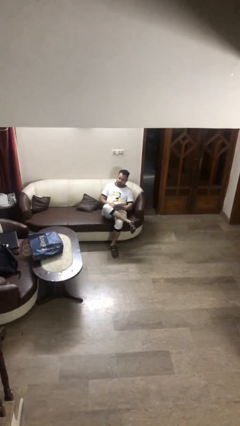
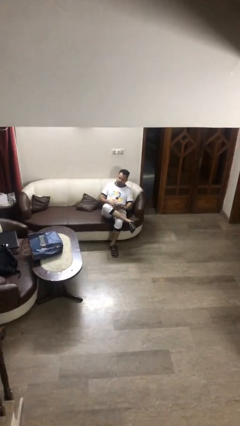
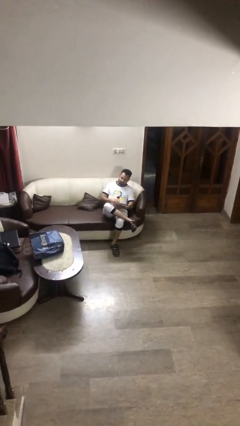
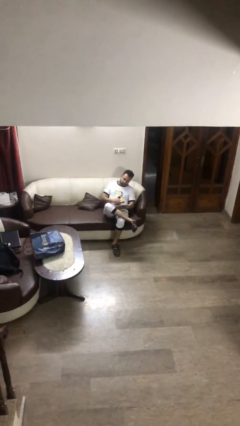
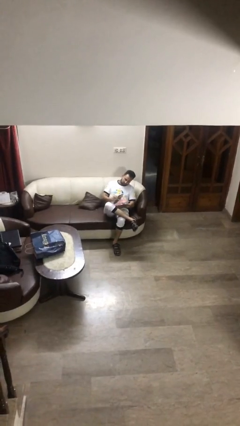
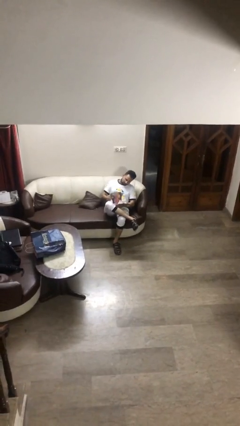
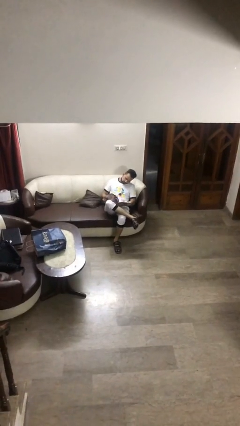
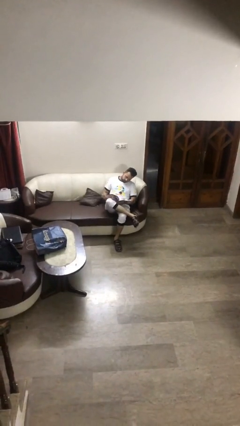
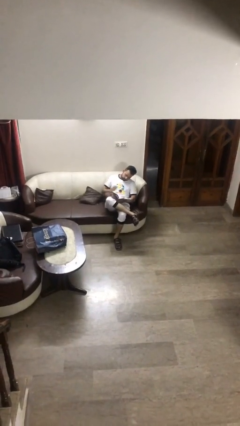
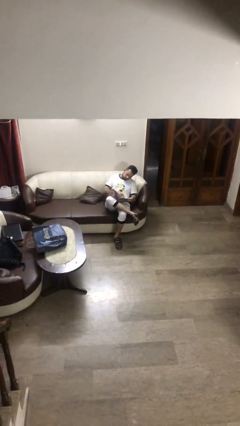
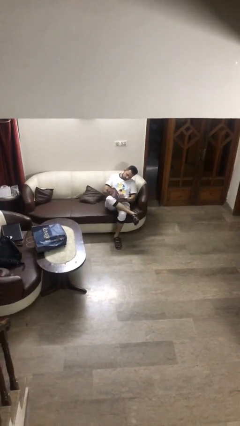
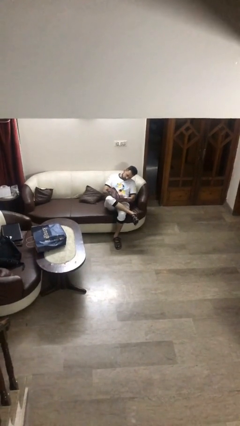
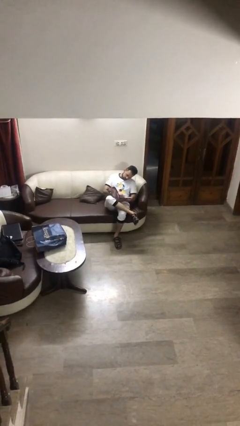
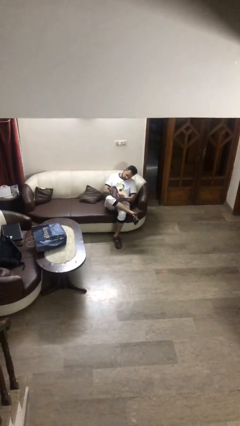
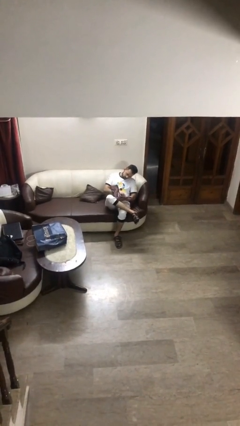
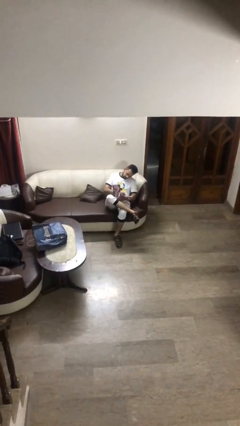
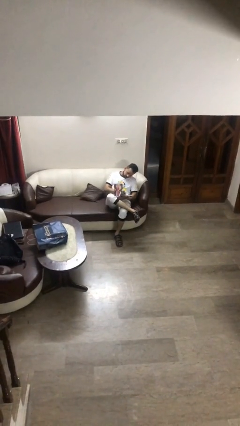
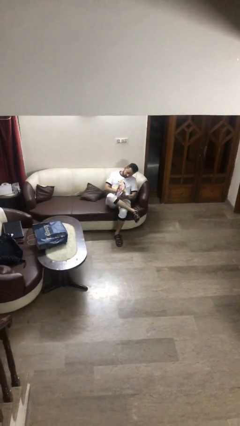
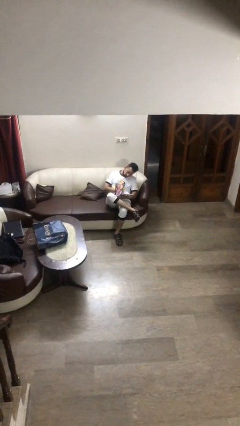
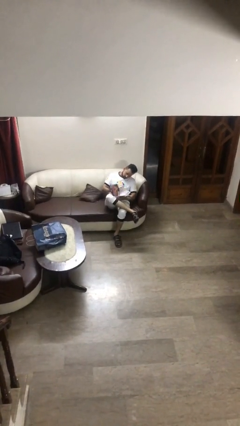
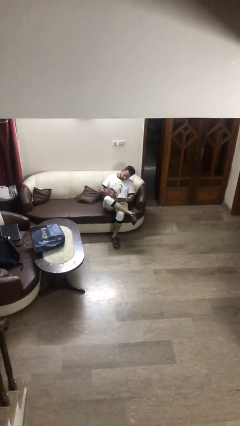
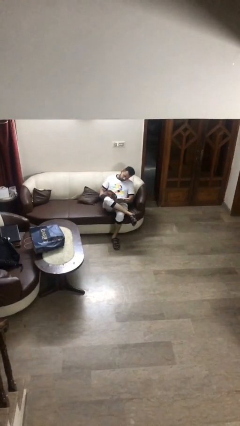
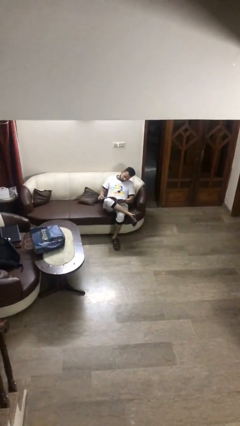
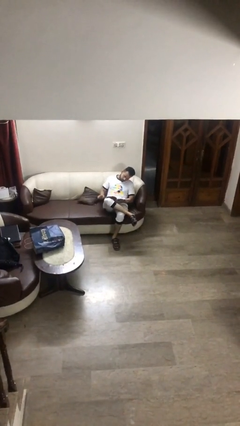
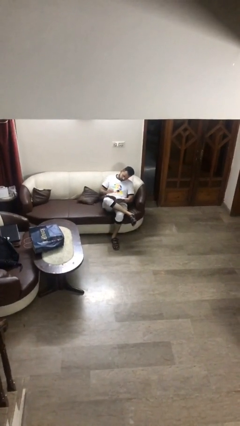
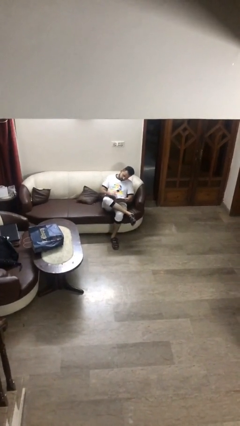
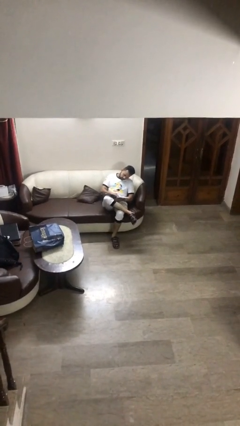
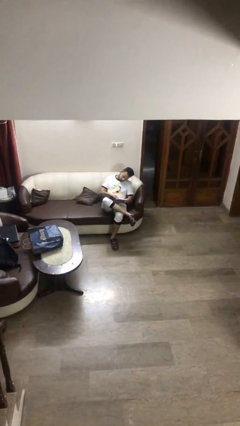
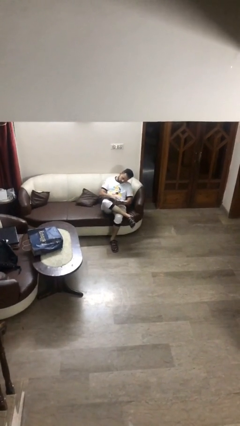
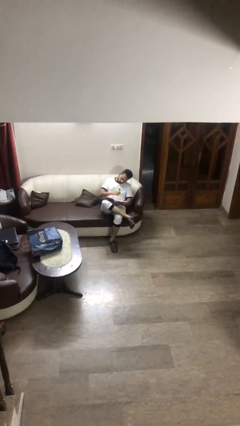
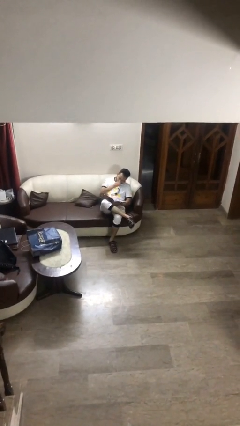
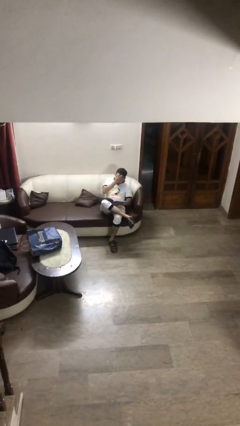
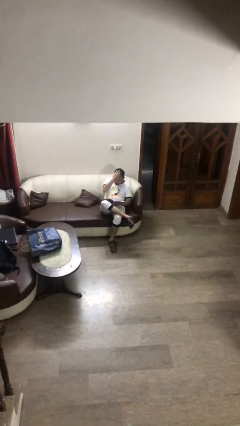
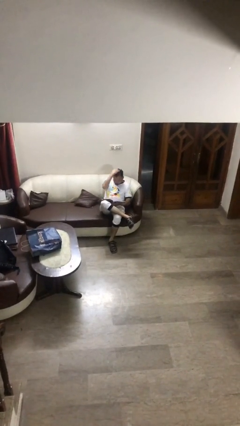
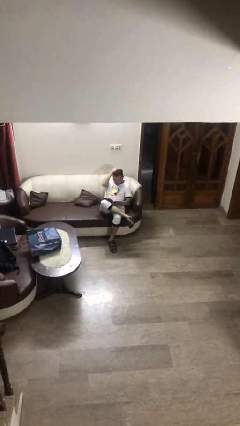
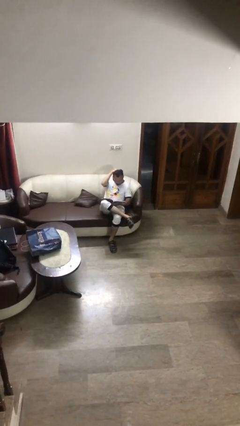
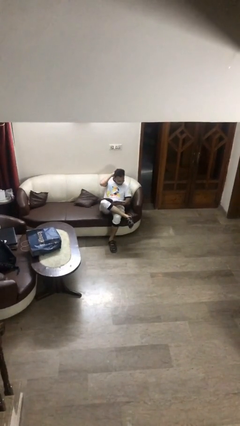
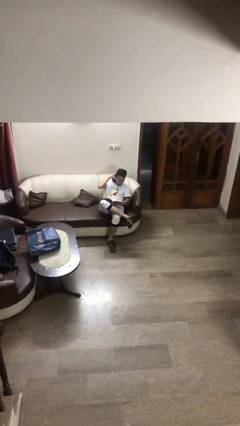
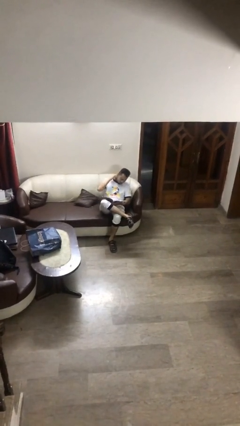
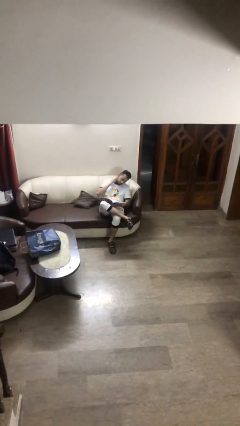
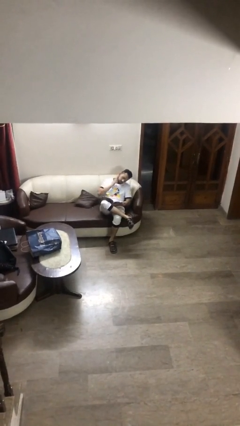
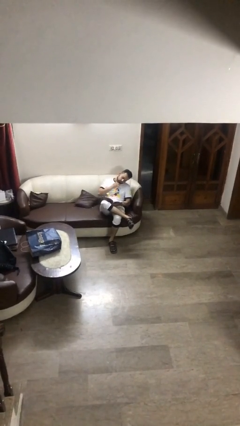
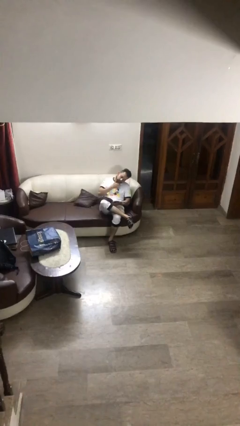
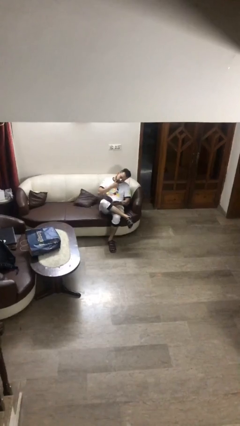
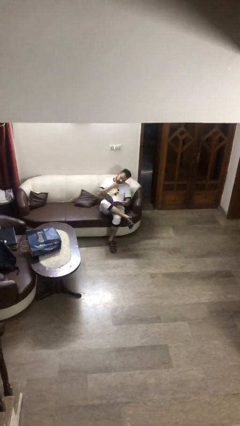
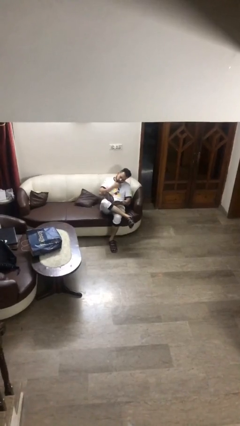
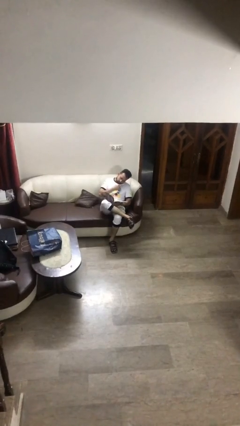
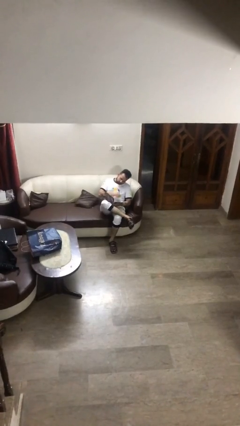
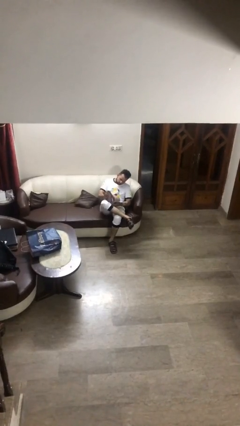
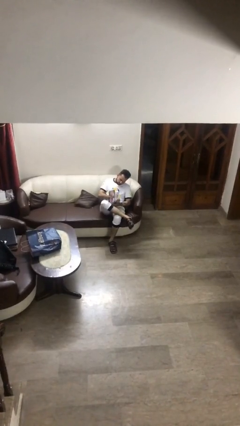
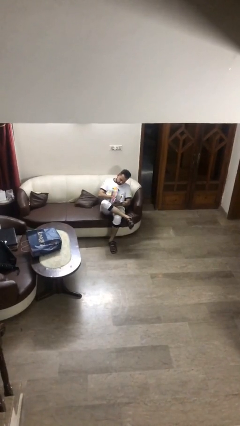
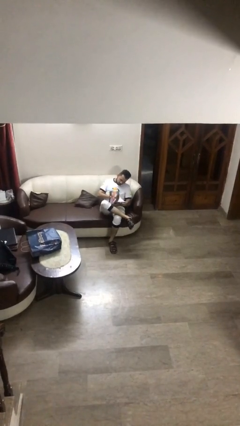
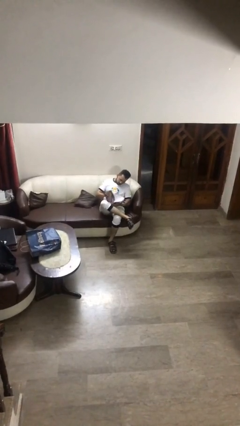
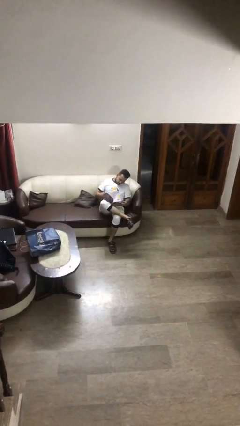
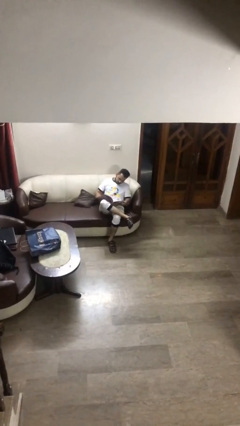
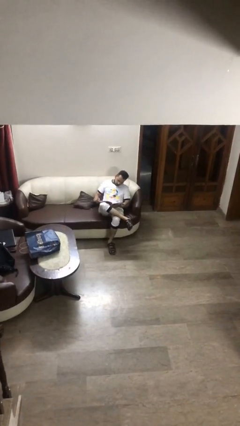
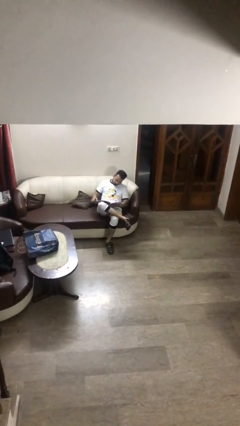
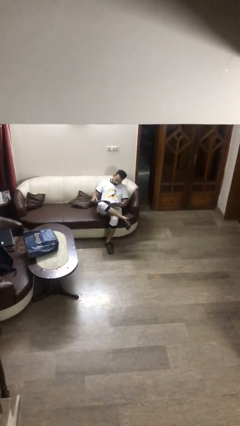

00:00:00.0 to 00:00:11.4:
person reads document

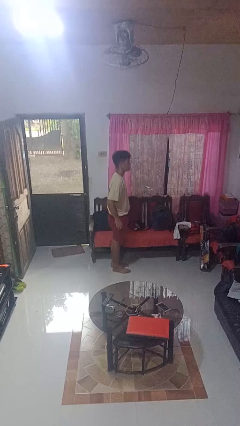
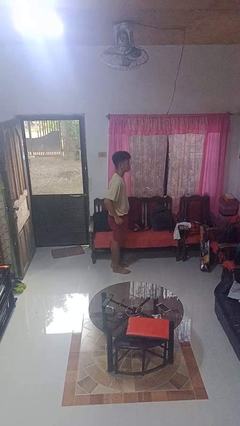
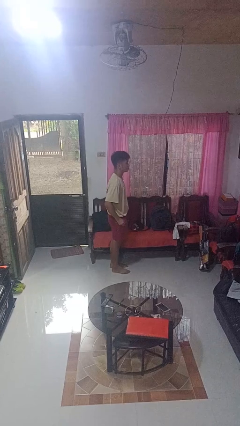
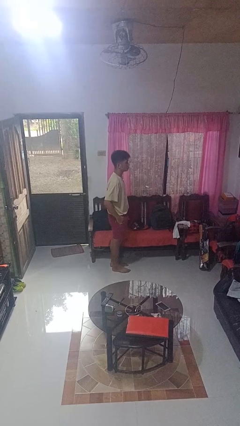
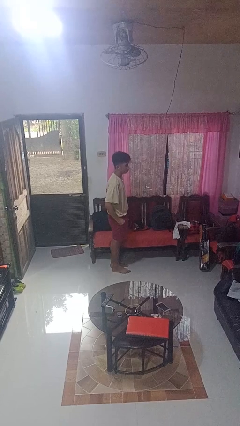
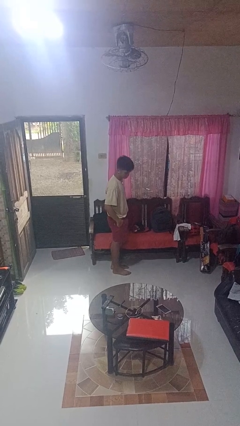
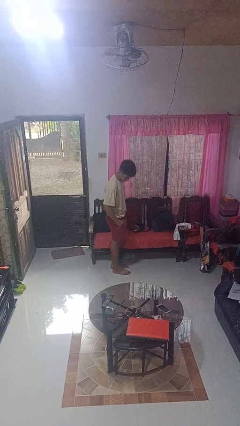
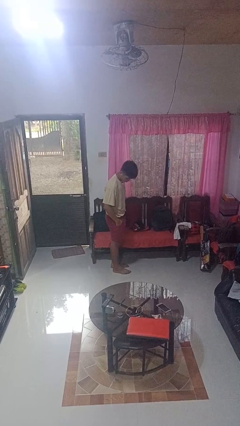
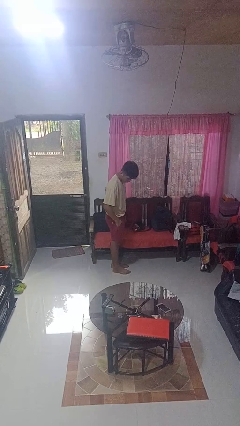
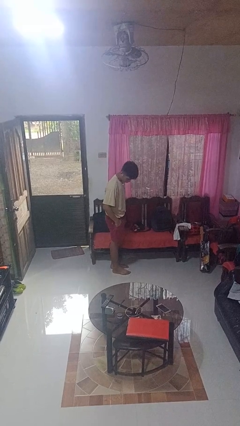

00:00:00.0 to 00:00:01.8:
person puts hands in back pockets

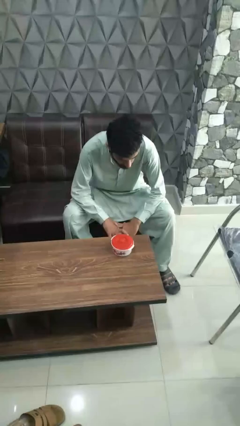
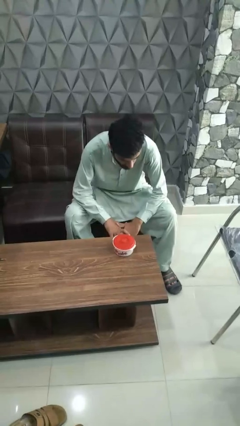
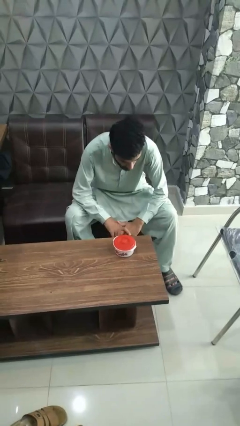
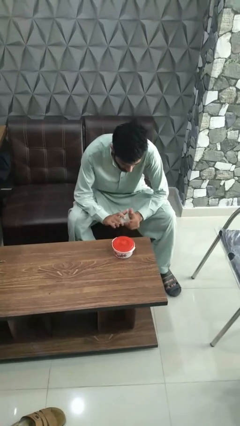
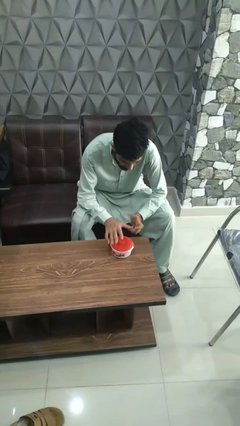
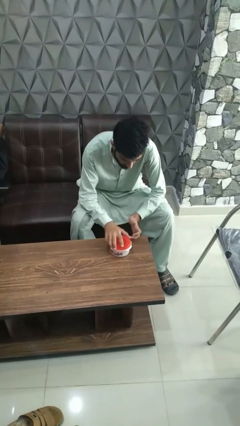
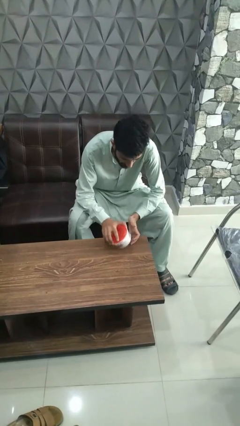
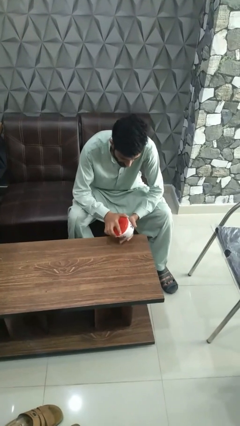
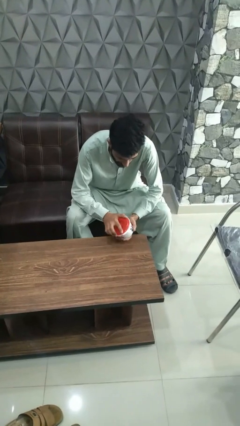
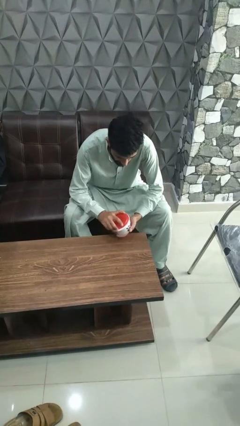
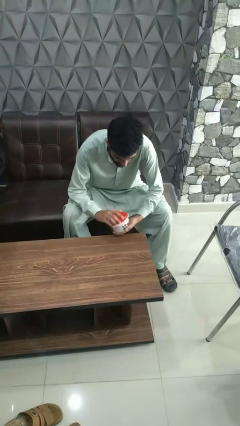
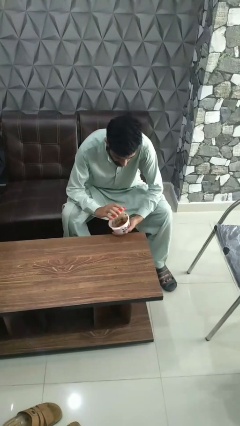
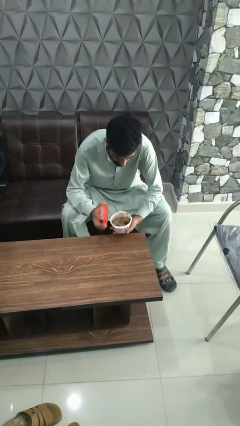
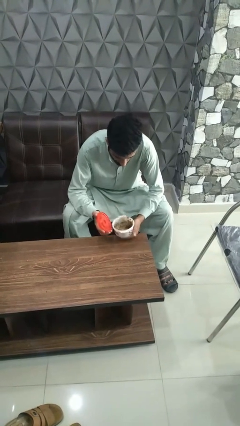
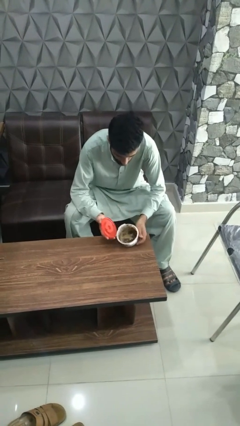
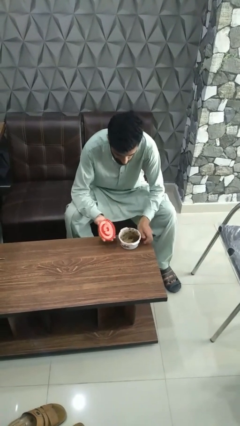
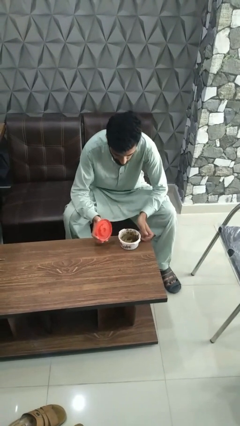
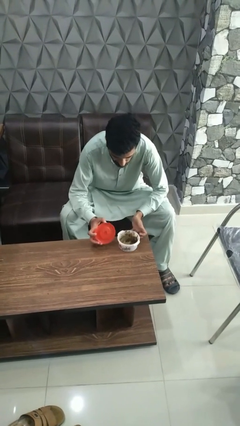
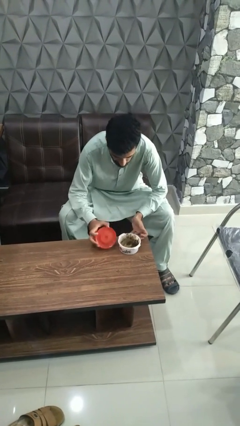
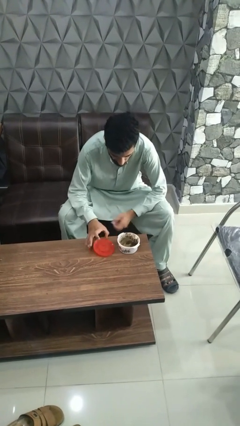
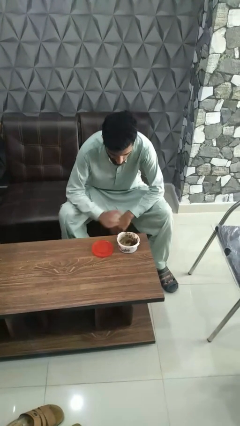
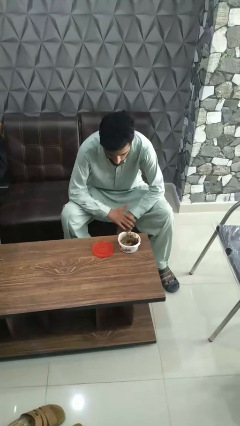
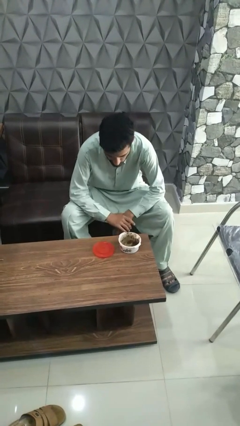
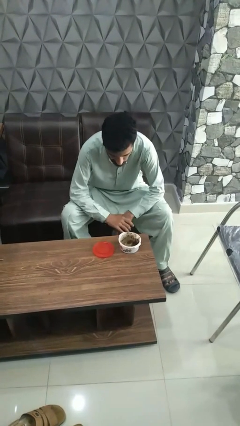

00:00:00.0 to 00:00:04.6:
person opens jar

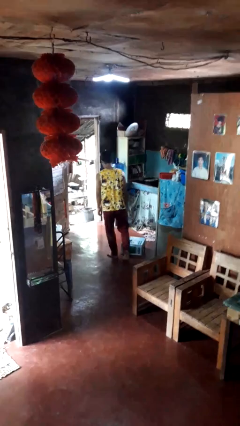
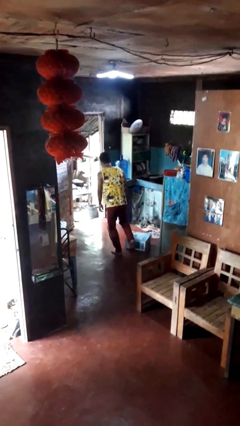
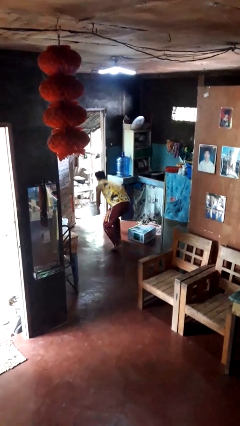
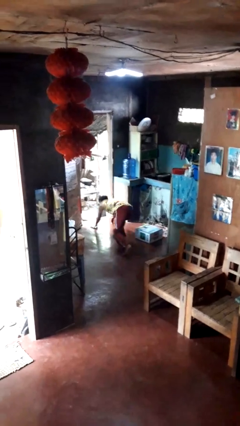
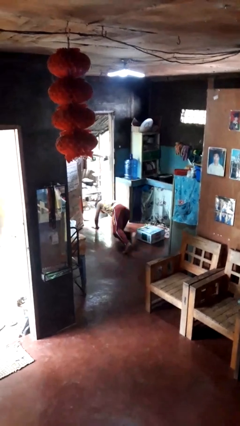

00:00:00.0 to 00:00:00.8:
person trips on object on floor
